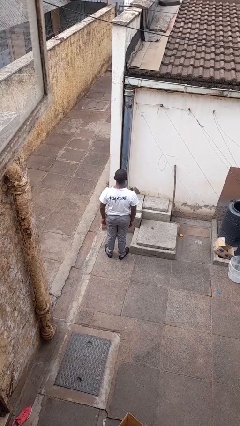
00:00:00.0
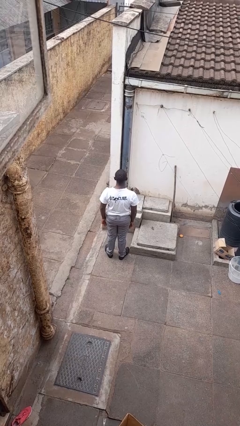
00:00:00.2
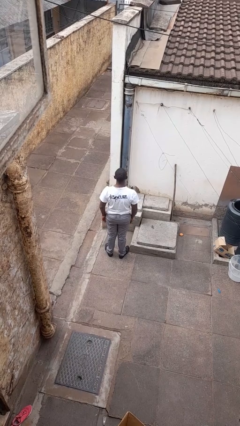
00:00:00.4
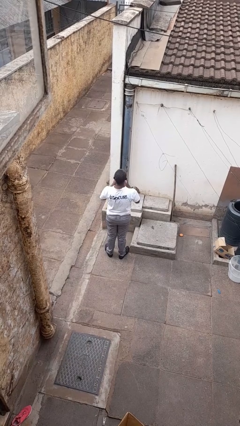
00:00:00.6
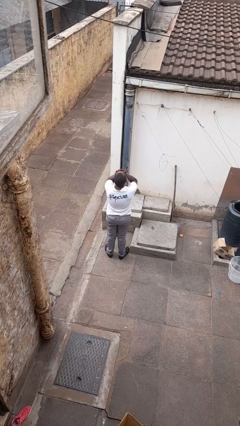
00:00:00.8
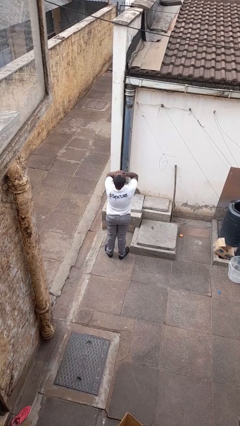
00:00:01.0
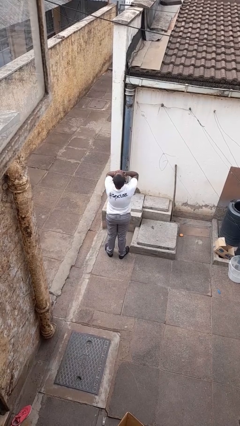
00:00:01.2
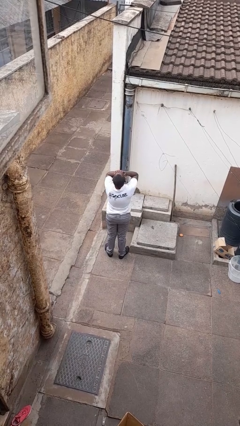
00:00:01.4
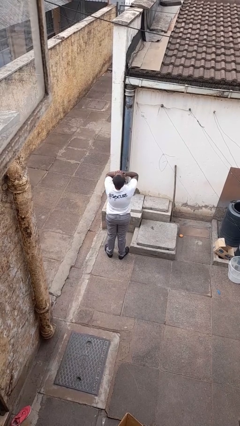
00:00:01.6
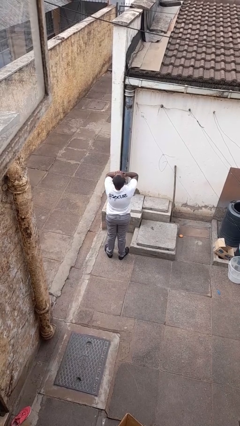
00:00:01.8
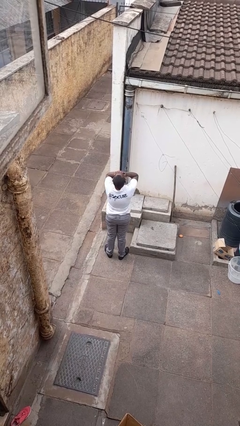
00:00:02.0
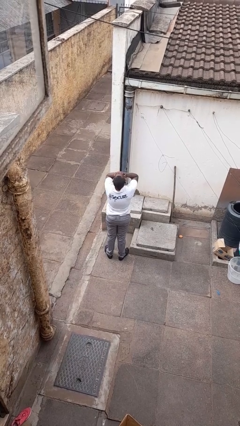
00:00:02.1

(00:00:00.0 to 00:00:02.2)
person covers face with hands

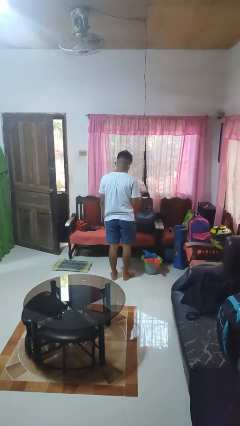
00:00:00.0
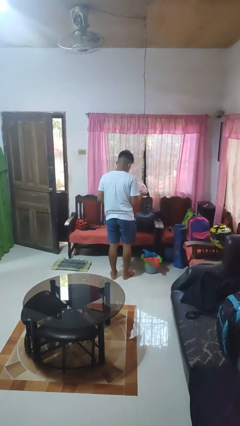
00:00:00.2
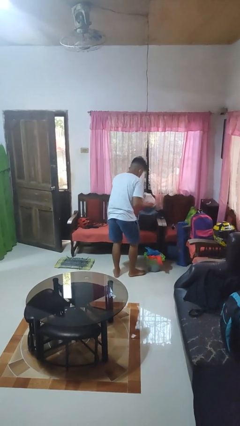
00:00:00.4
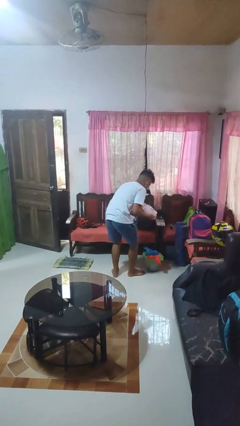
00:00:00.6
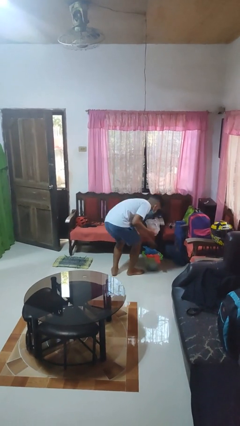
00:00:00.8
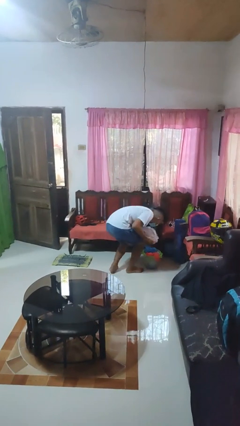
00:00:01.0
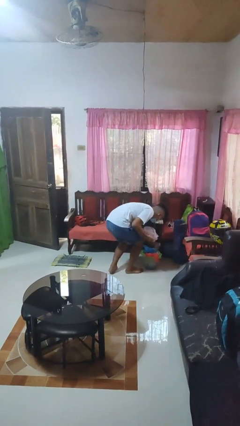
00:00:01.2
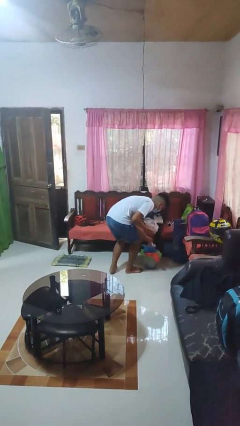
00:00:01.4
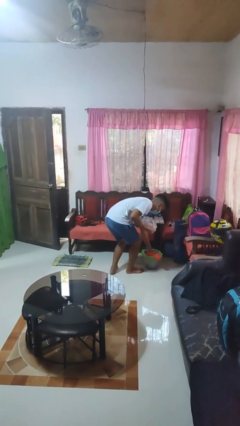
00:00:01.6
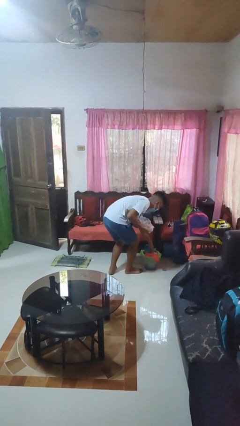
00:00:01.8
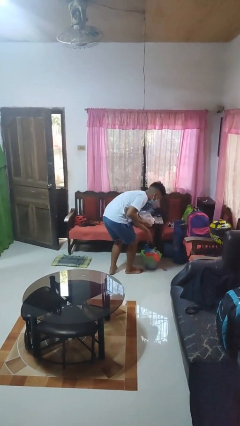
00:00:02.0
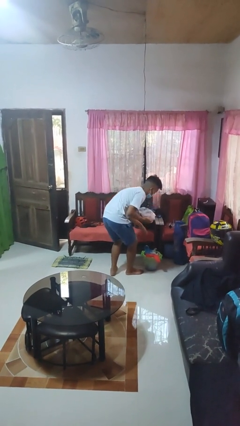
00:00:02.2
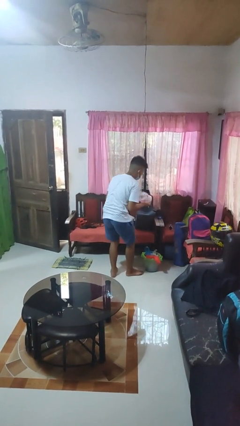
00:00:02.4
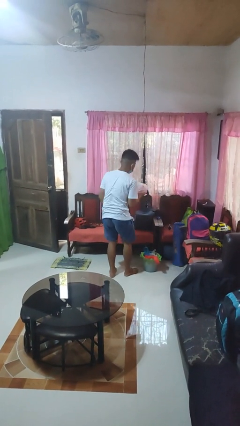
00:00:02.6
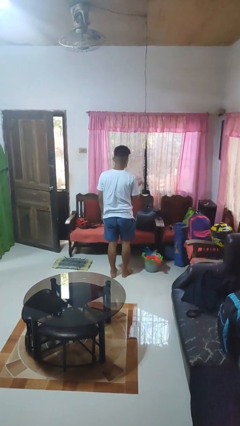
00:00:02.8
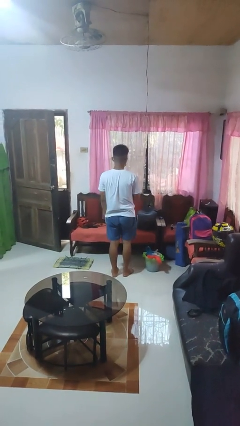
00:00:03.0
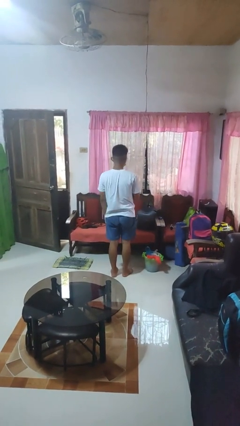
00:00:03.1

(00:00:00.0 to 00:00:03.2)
person discards trash

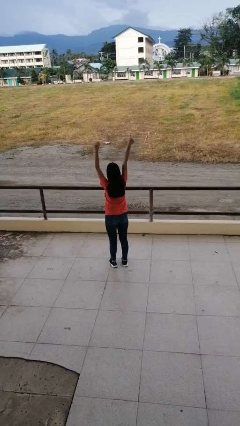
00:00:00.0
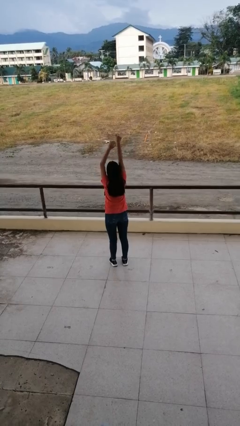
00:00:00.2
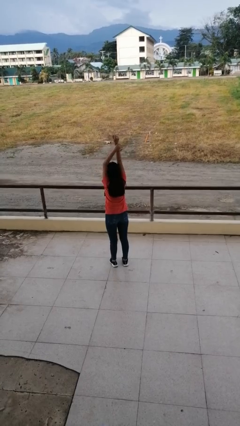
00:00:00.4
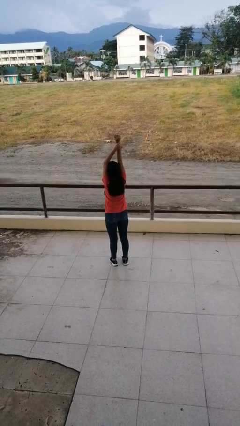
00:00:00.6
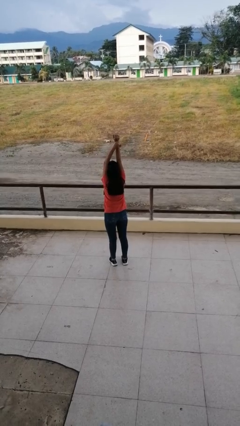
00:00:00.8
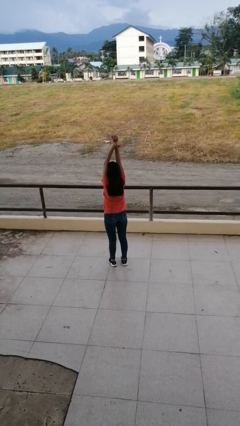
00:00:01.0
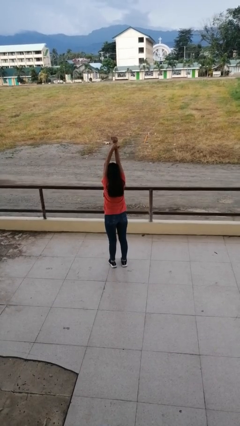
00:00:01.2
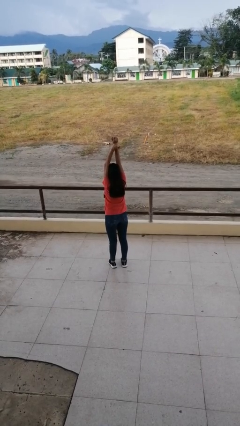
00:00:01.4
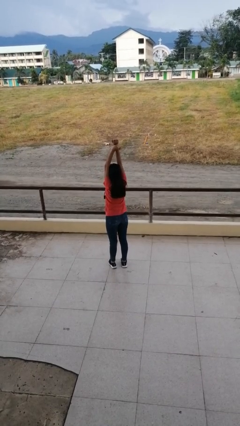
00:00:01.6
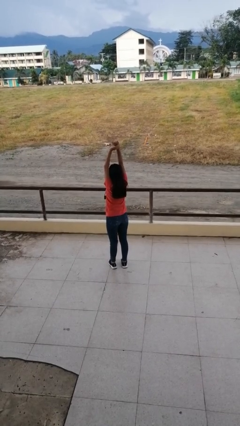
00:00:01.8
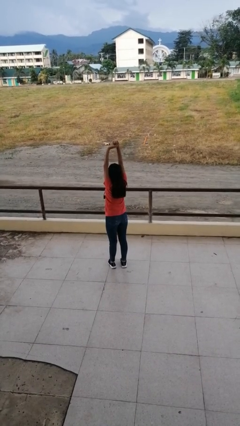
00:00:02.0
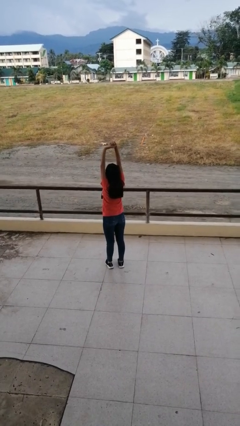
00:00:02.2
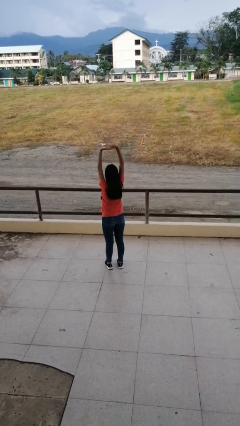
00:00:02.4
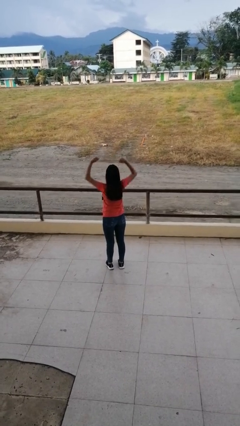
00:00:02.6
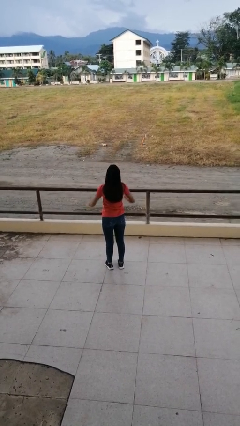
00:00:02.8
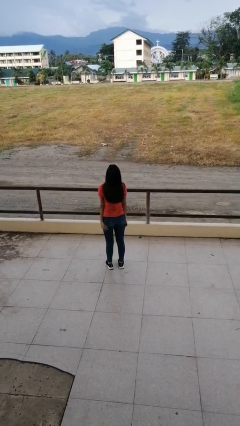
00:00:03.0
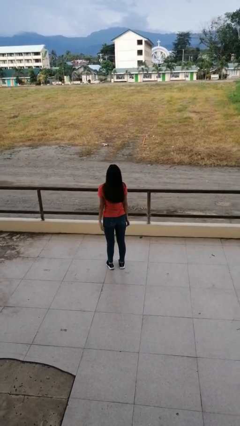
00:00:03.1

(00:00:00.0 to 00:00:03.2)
person stretches arms over head

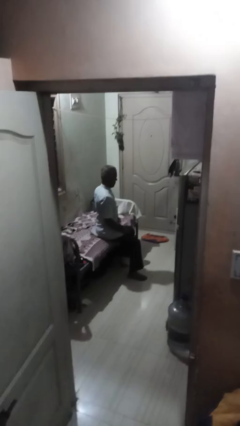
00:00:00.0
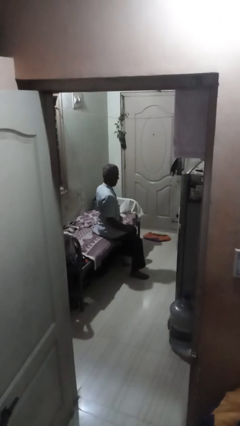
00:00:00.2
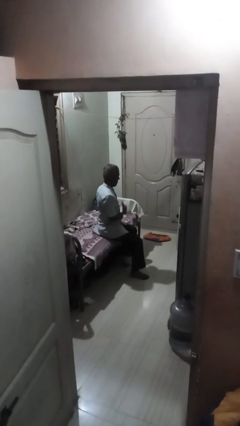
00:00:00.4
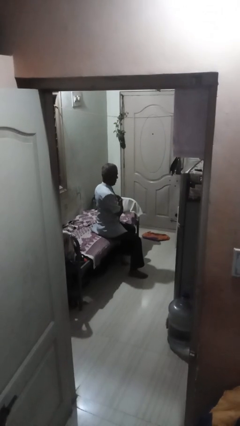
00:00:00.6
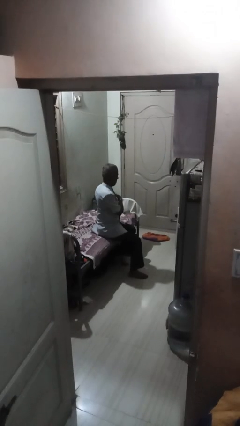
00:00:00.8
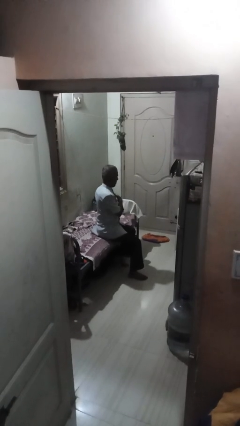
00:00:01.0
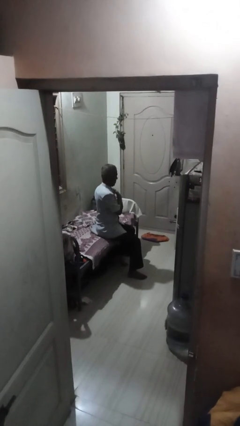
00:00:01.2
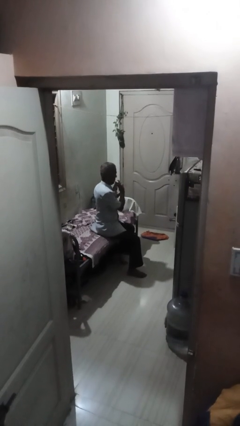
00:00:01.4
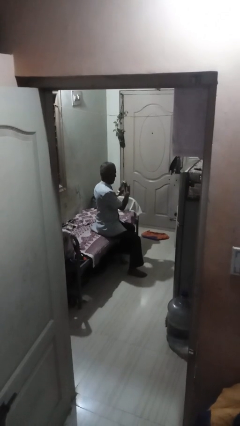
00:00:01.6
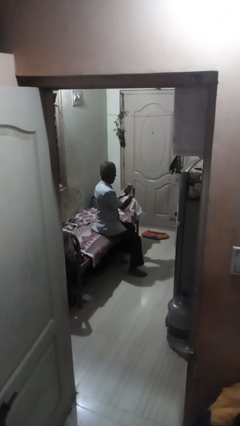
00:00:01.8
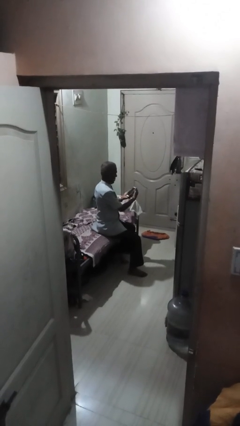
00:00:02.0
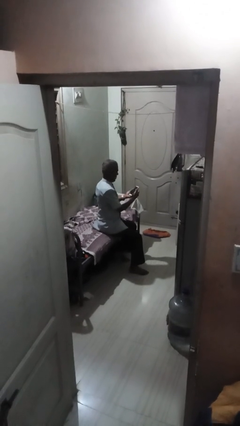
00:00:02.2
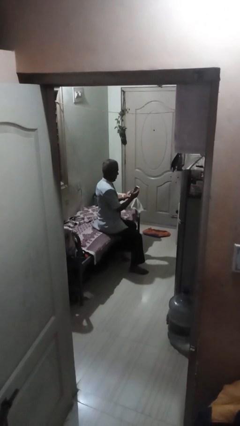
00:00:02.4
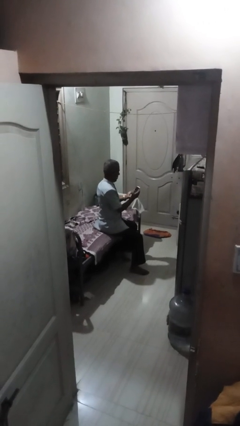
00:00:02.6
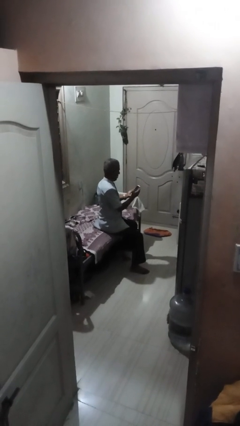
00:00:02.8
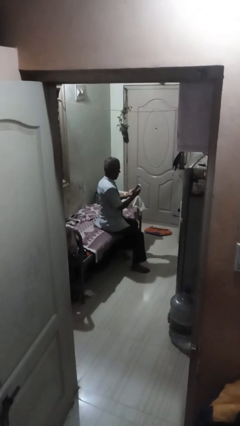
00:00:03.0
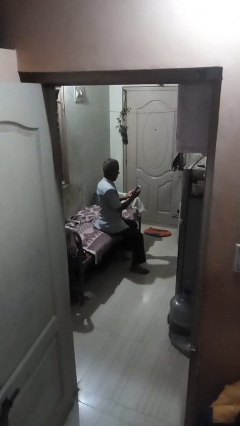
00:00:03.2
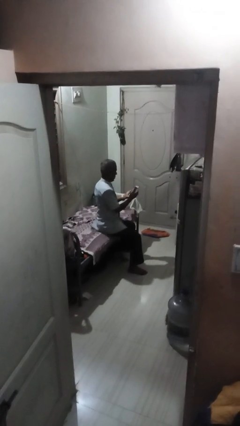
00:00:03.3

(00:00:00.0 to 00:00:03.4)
person takes phone from pocket

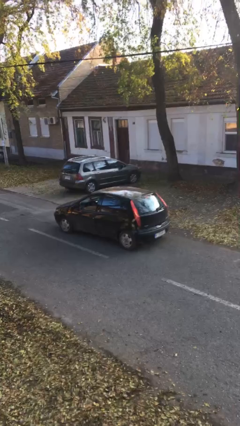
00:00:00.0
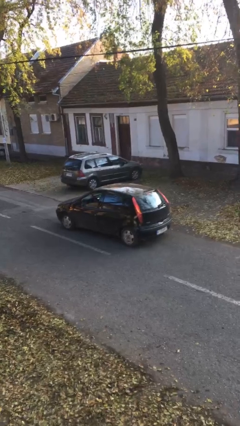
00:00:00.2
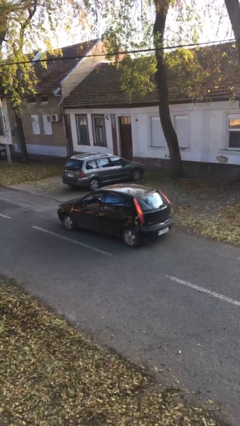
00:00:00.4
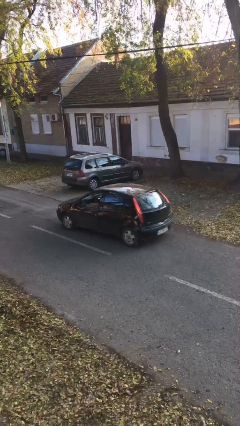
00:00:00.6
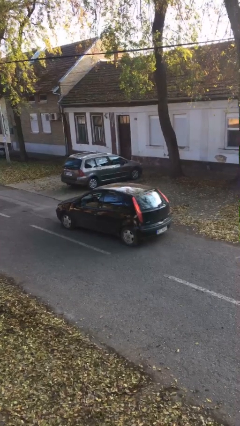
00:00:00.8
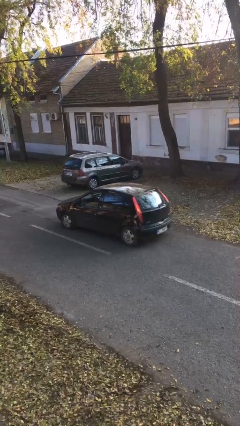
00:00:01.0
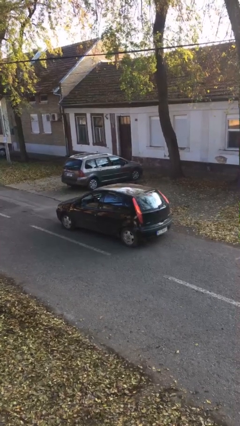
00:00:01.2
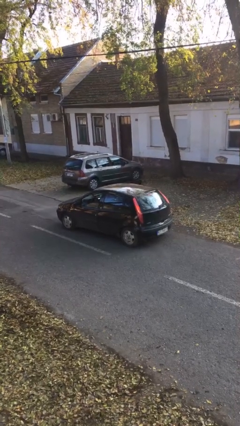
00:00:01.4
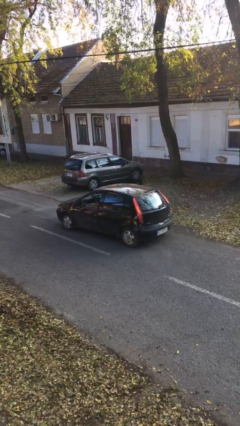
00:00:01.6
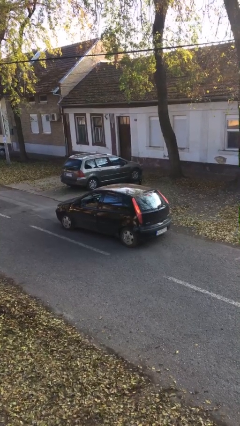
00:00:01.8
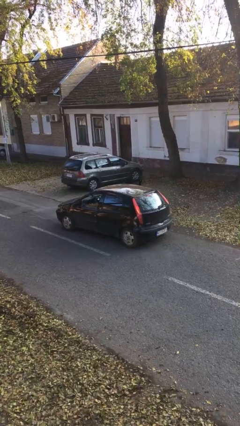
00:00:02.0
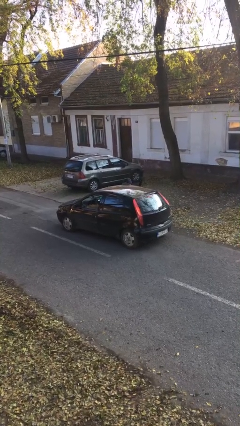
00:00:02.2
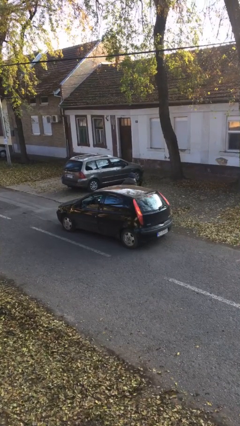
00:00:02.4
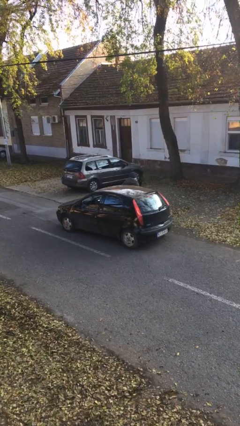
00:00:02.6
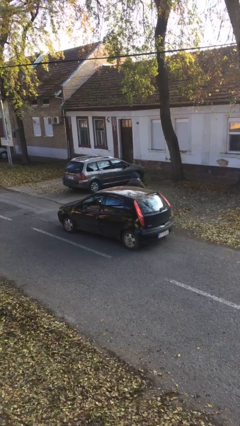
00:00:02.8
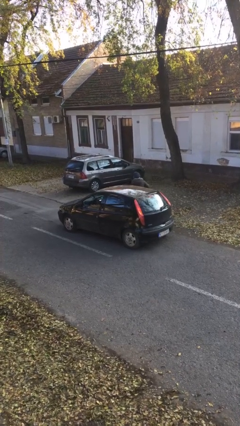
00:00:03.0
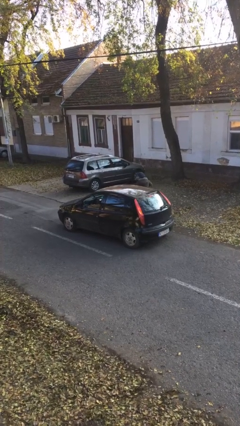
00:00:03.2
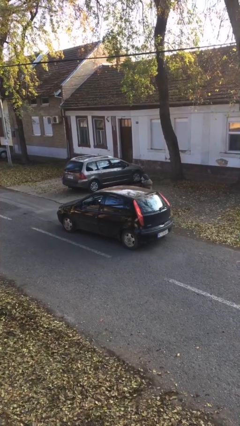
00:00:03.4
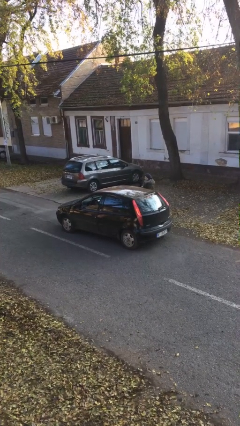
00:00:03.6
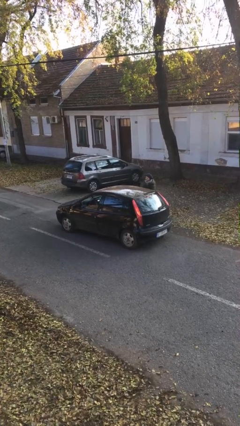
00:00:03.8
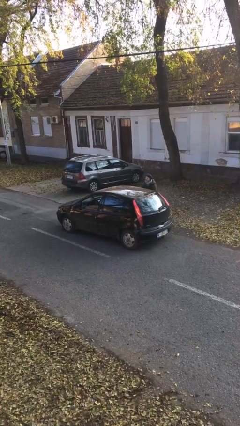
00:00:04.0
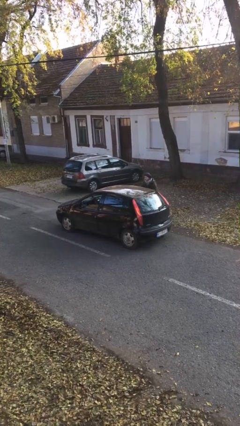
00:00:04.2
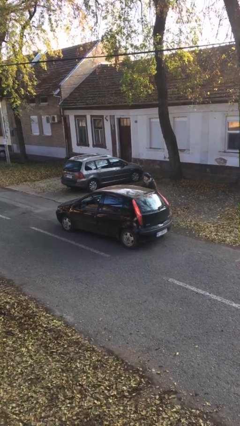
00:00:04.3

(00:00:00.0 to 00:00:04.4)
car drops off person

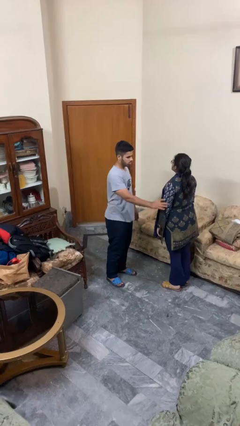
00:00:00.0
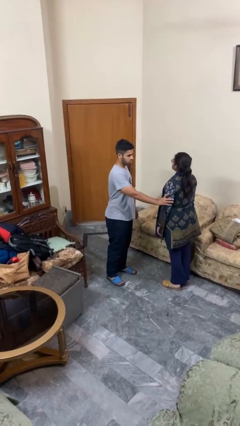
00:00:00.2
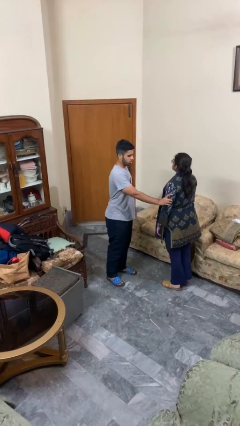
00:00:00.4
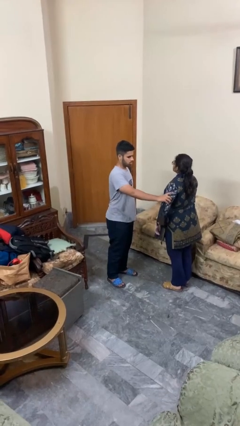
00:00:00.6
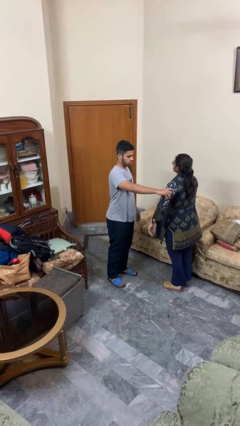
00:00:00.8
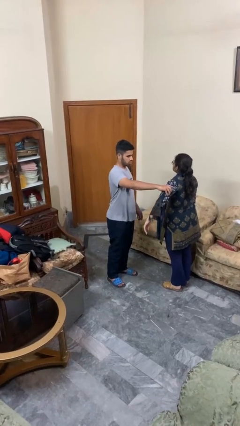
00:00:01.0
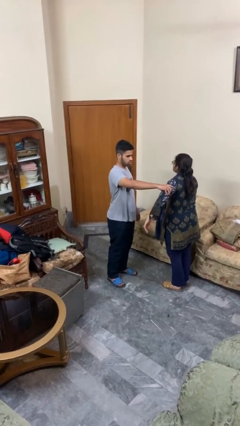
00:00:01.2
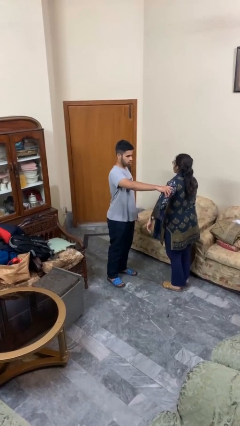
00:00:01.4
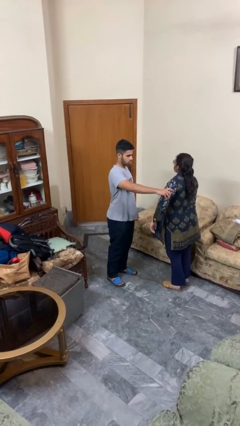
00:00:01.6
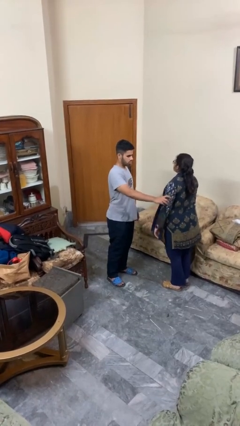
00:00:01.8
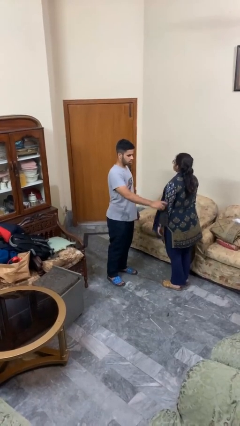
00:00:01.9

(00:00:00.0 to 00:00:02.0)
person grabs person by bicep